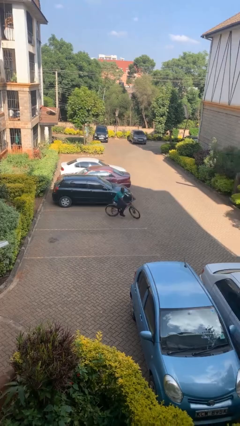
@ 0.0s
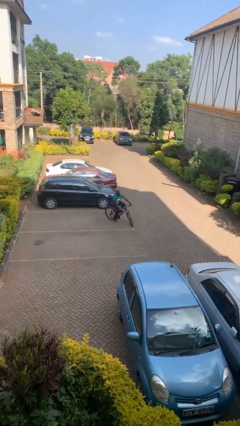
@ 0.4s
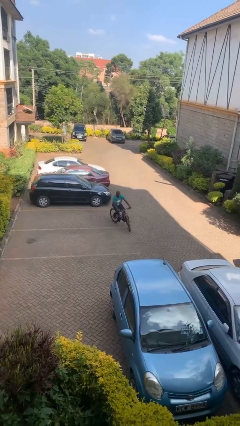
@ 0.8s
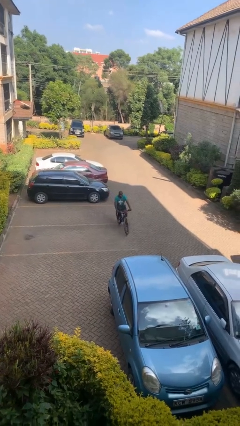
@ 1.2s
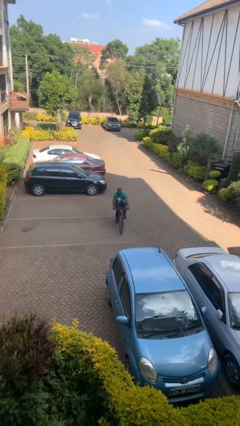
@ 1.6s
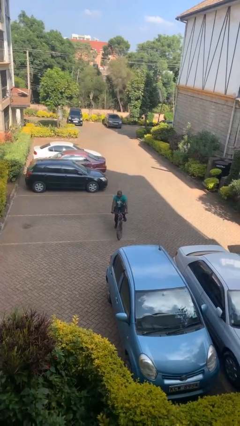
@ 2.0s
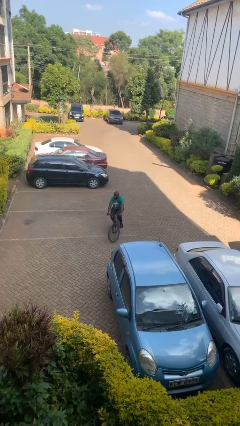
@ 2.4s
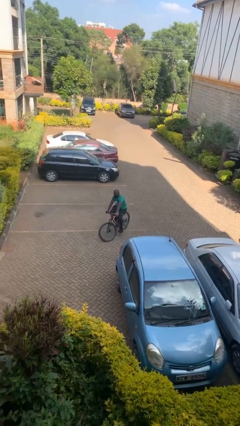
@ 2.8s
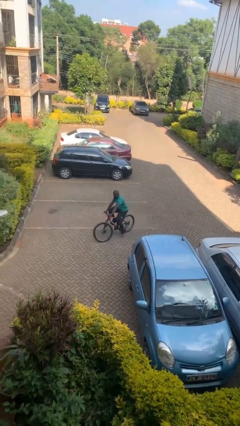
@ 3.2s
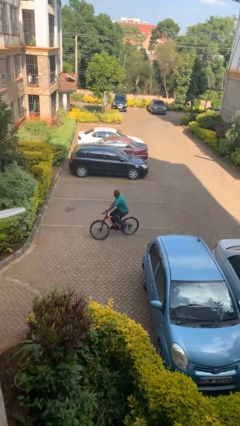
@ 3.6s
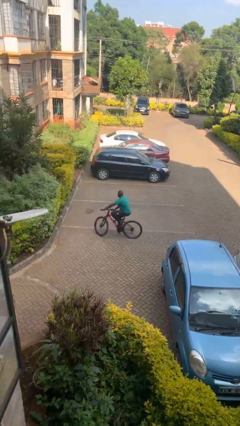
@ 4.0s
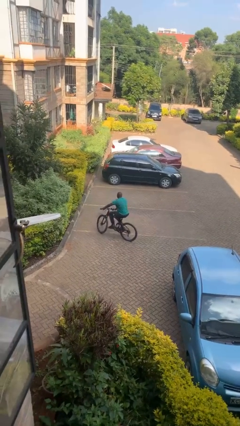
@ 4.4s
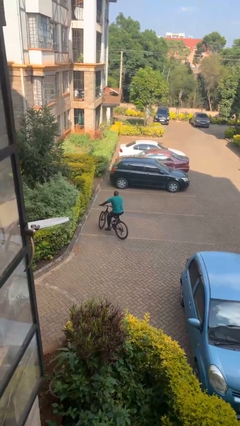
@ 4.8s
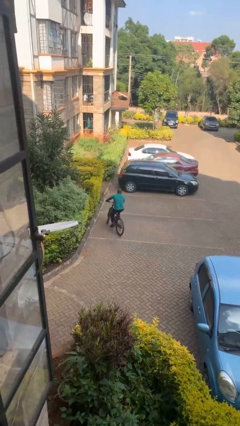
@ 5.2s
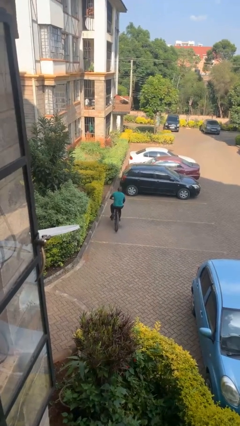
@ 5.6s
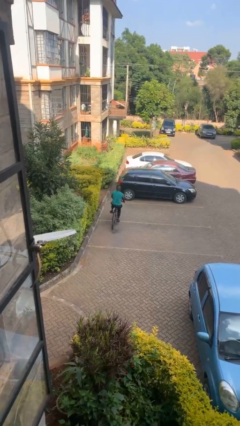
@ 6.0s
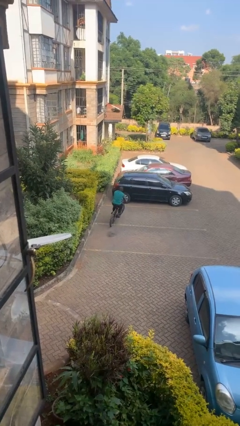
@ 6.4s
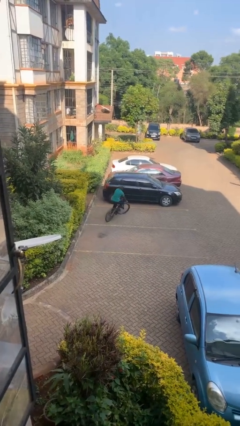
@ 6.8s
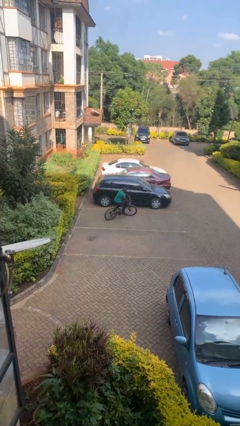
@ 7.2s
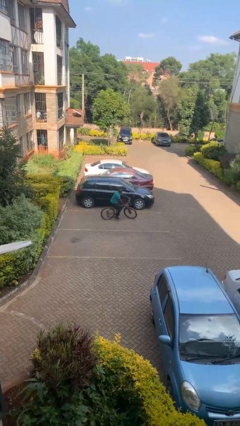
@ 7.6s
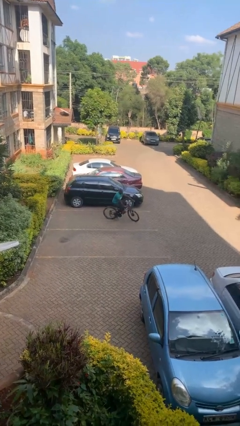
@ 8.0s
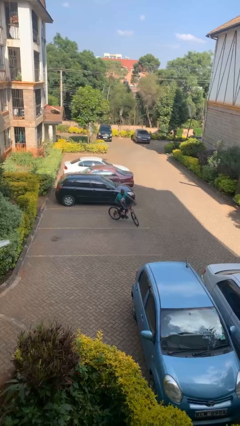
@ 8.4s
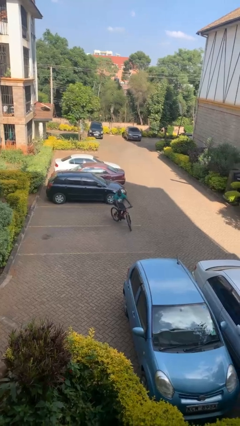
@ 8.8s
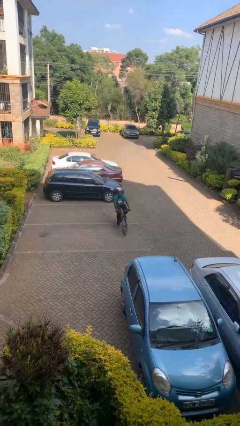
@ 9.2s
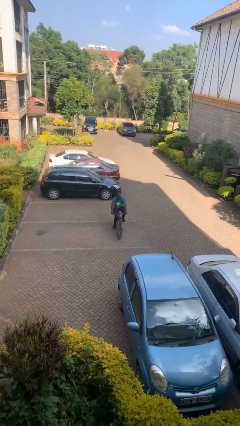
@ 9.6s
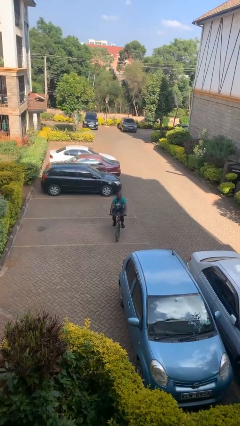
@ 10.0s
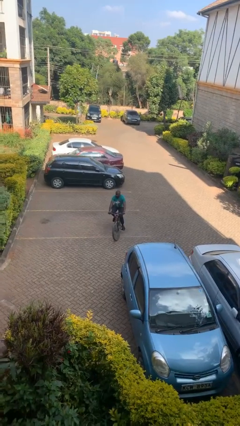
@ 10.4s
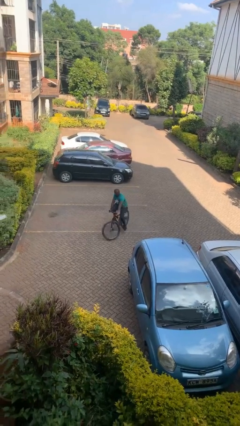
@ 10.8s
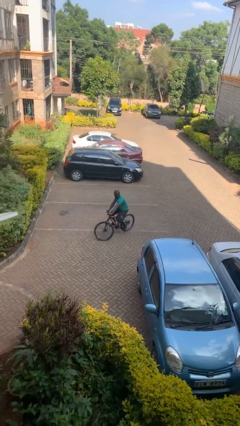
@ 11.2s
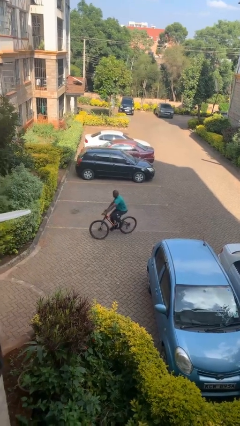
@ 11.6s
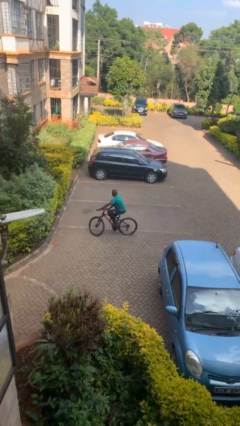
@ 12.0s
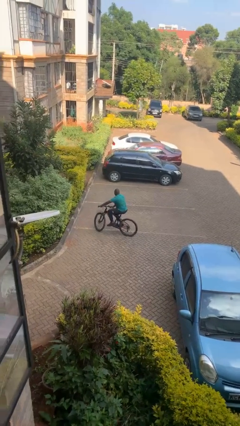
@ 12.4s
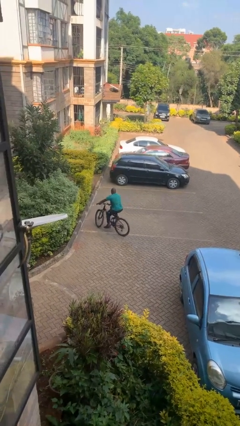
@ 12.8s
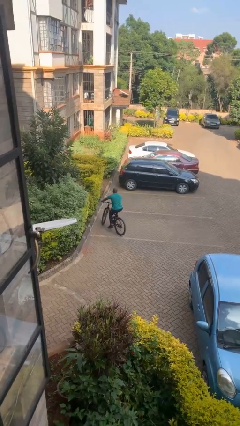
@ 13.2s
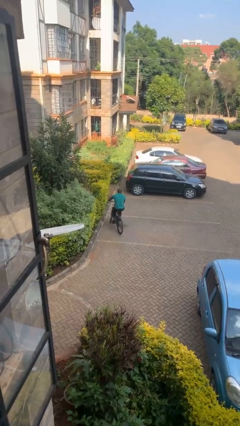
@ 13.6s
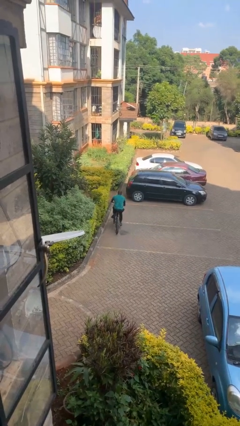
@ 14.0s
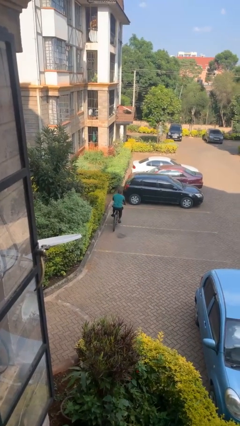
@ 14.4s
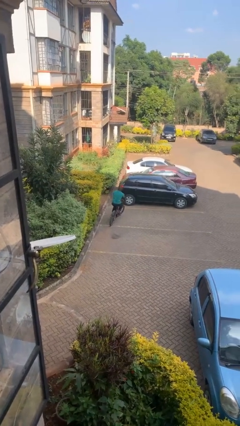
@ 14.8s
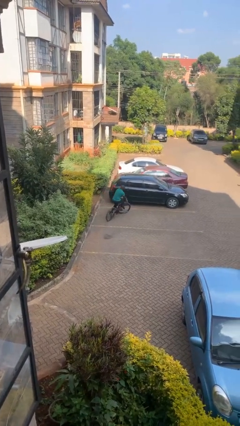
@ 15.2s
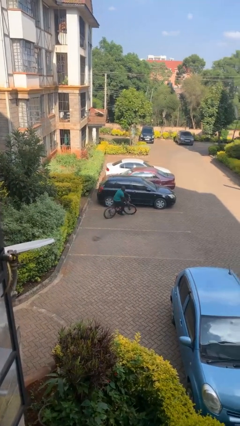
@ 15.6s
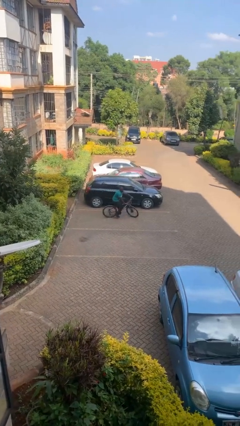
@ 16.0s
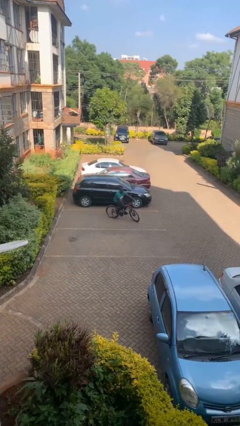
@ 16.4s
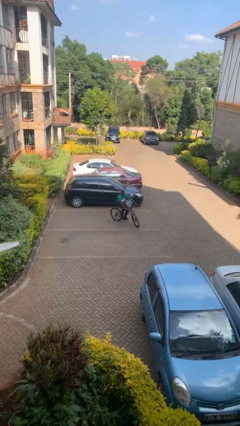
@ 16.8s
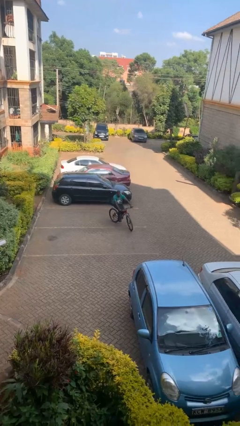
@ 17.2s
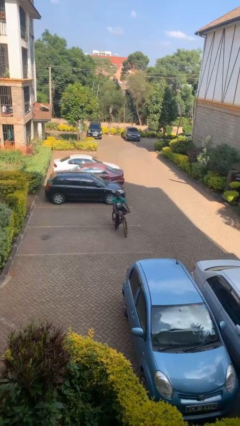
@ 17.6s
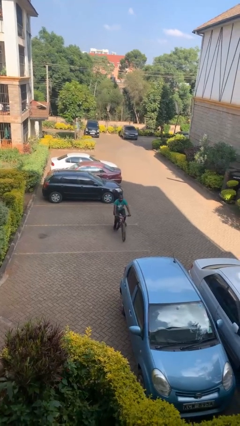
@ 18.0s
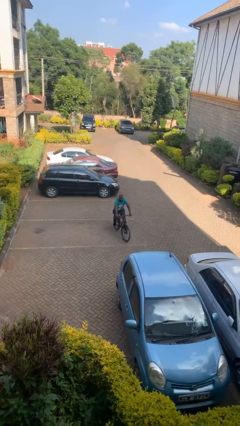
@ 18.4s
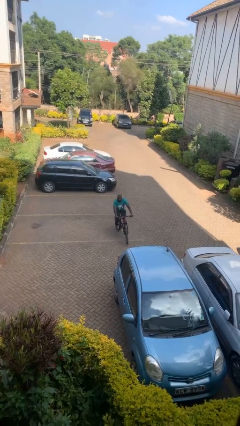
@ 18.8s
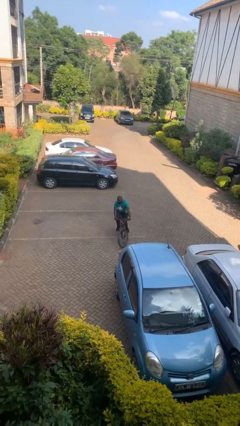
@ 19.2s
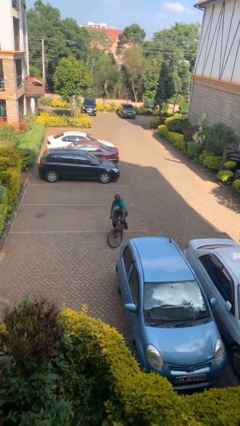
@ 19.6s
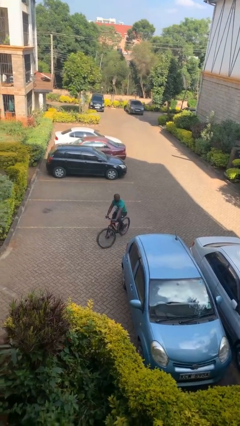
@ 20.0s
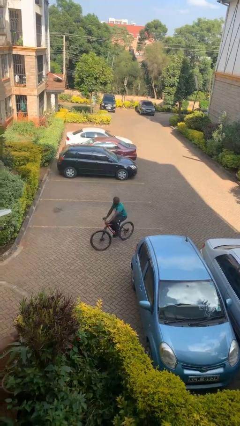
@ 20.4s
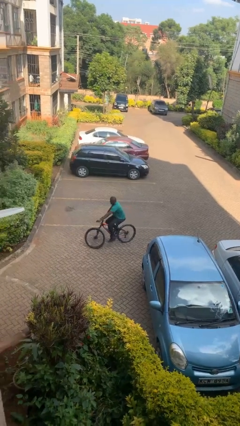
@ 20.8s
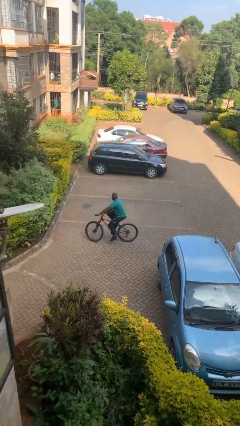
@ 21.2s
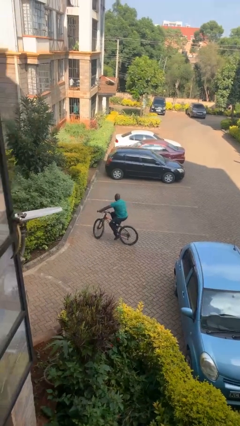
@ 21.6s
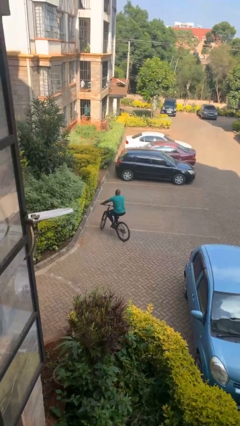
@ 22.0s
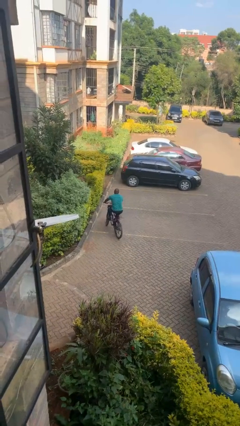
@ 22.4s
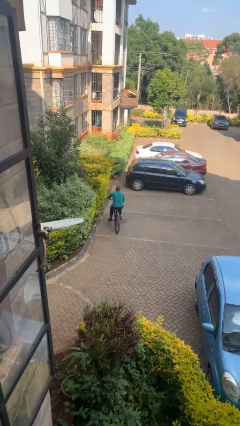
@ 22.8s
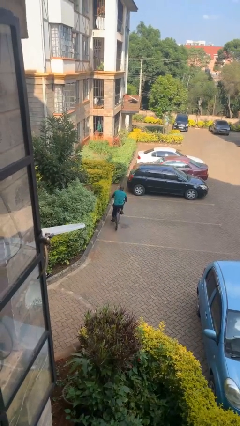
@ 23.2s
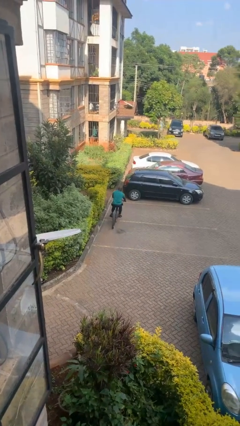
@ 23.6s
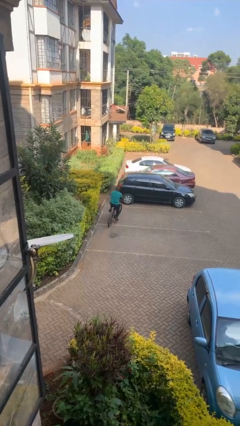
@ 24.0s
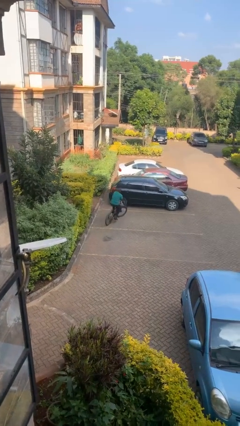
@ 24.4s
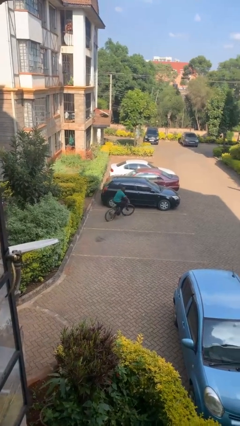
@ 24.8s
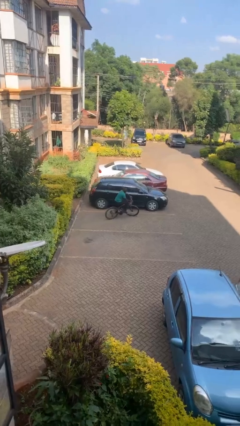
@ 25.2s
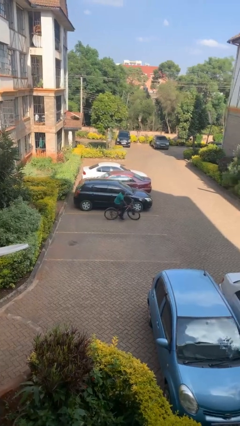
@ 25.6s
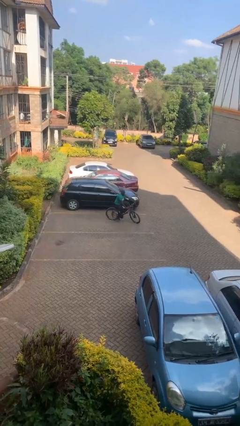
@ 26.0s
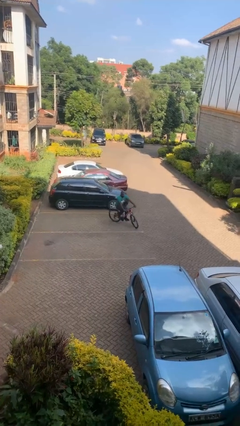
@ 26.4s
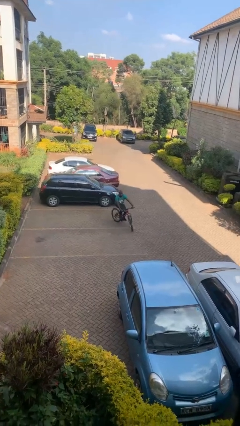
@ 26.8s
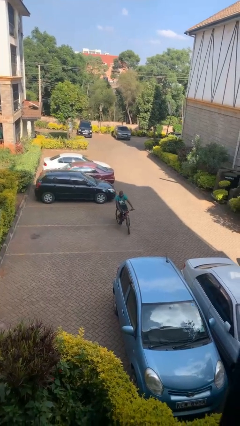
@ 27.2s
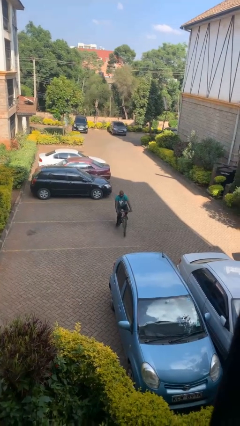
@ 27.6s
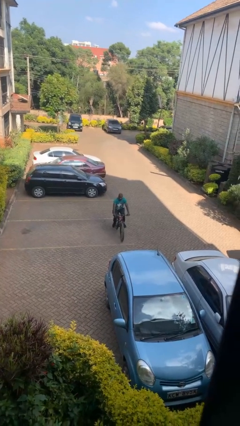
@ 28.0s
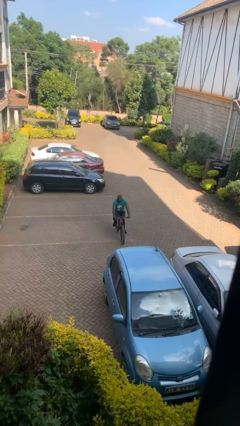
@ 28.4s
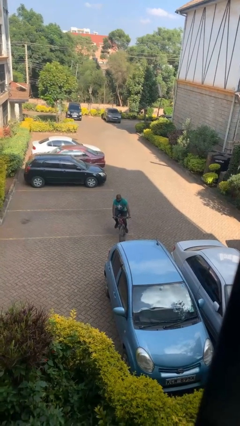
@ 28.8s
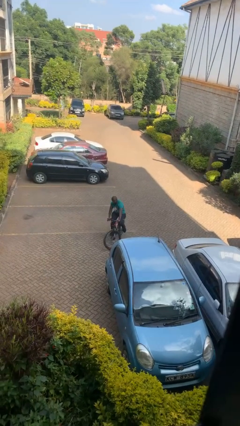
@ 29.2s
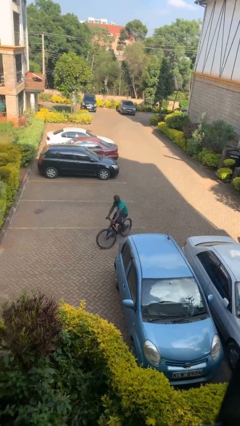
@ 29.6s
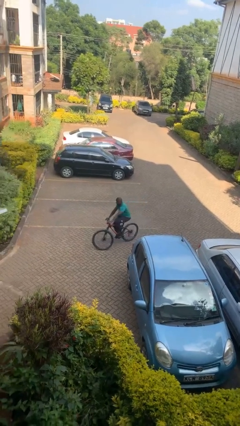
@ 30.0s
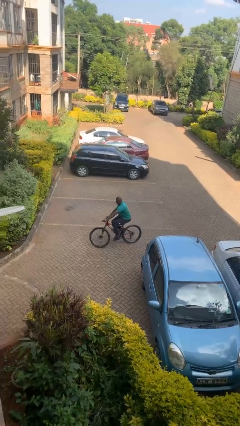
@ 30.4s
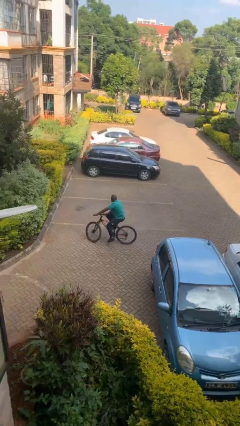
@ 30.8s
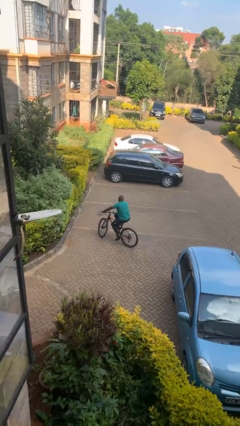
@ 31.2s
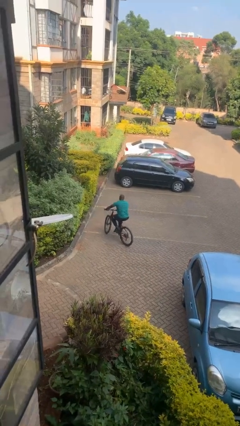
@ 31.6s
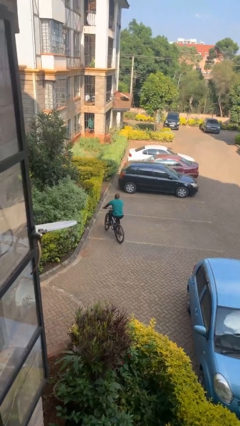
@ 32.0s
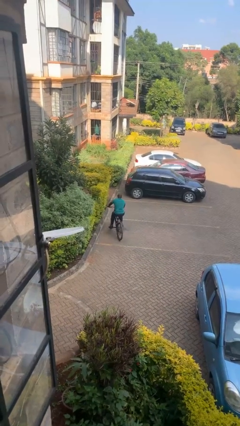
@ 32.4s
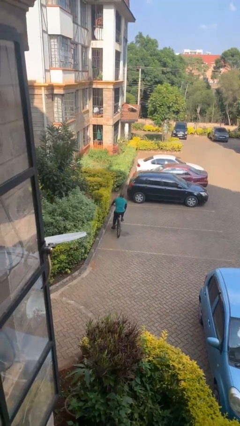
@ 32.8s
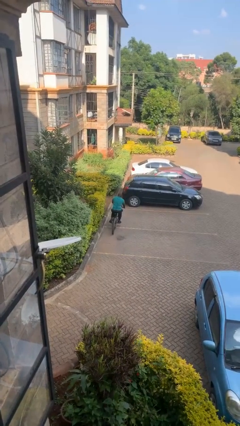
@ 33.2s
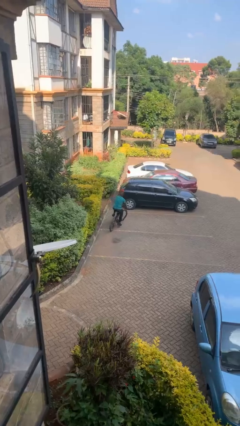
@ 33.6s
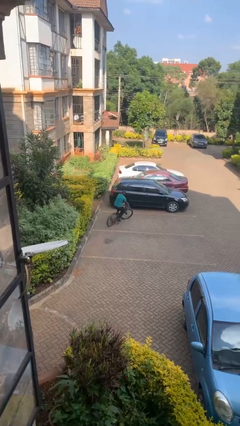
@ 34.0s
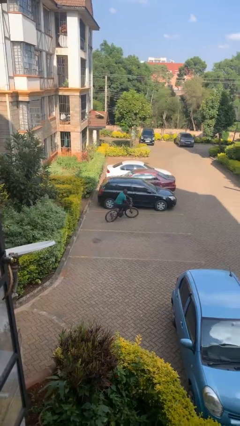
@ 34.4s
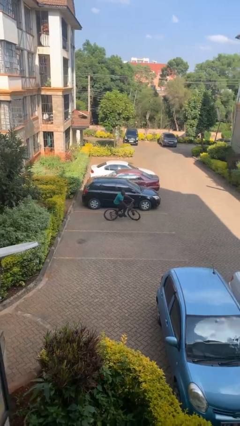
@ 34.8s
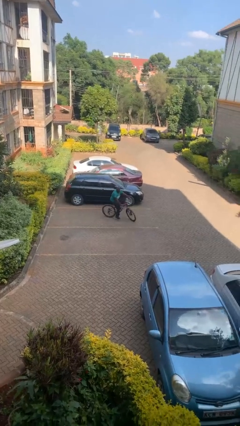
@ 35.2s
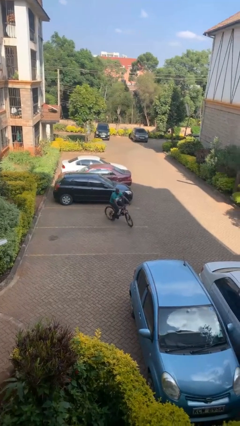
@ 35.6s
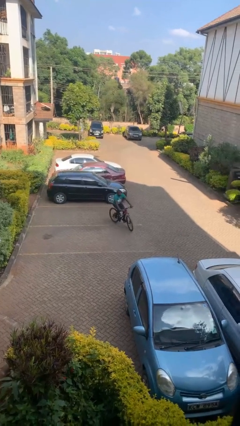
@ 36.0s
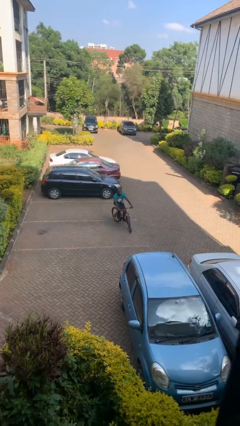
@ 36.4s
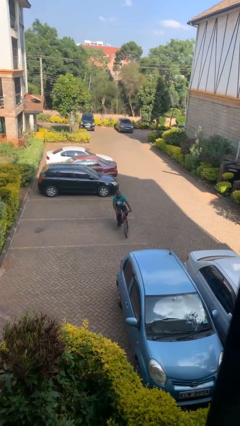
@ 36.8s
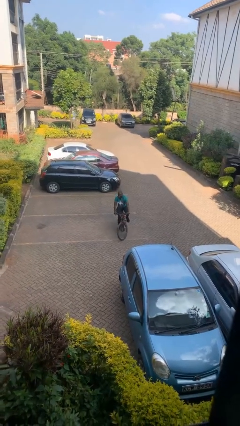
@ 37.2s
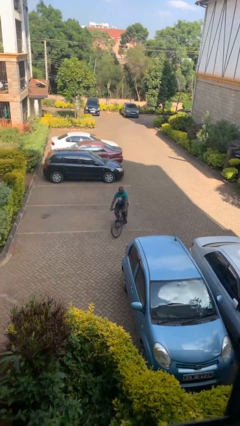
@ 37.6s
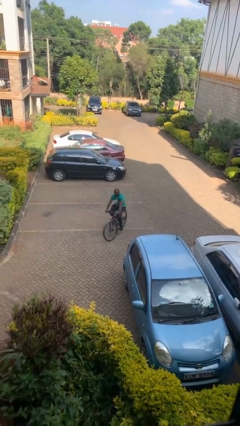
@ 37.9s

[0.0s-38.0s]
person rides bicycle
